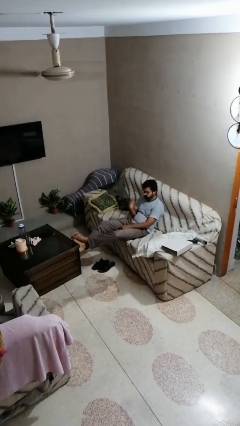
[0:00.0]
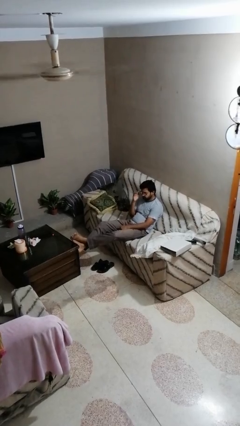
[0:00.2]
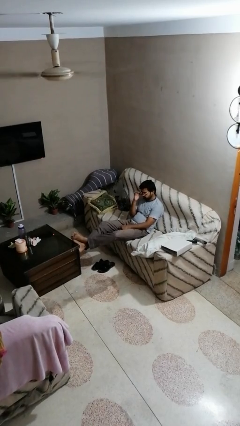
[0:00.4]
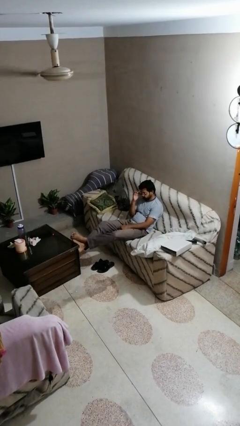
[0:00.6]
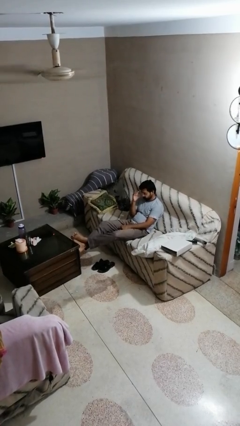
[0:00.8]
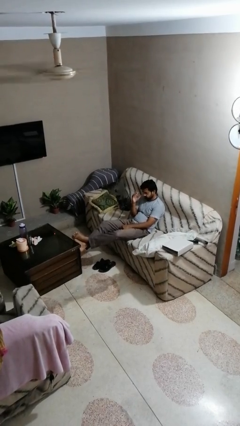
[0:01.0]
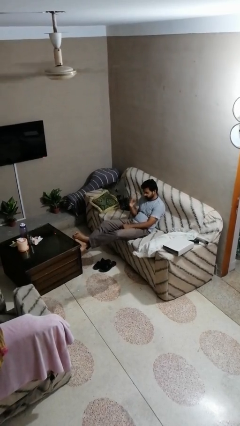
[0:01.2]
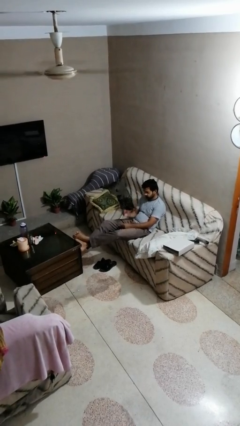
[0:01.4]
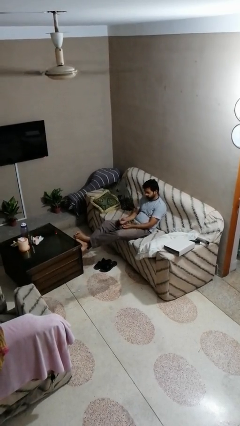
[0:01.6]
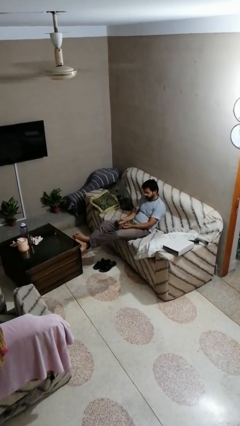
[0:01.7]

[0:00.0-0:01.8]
person takes off glasses

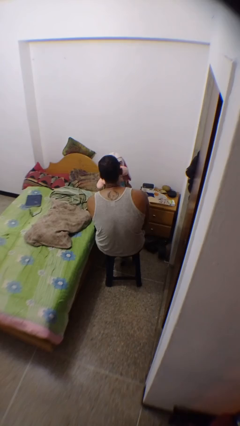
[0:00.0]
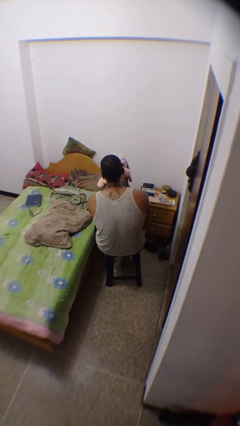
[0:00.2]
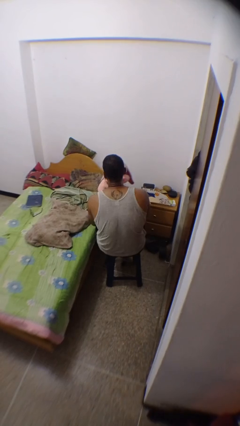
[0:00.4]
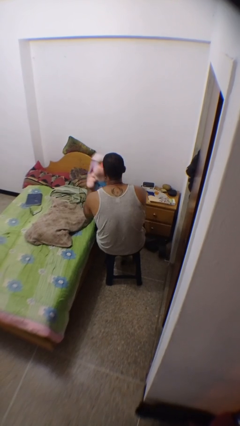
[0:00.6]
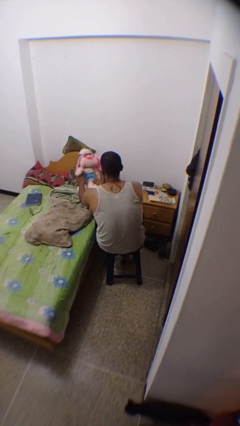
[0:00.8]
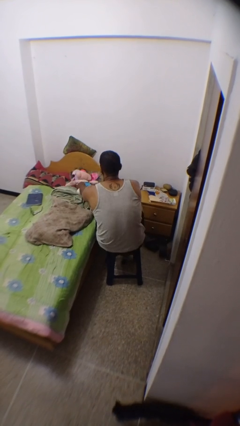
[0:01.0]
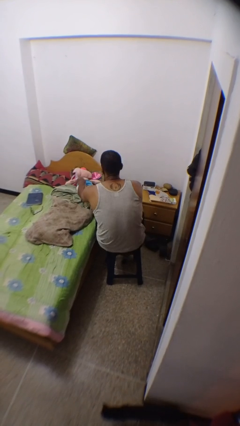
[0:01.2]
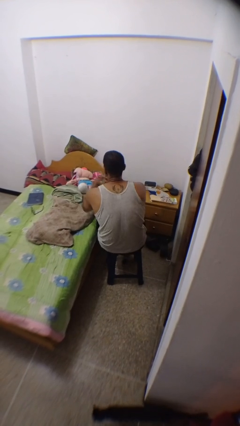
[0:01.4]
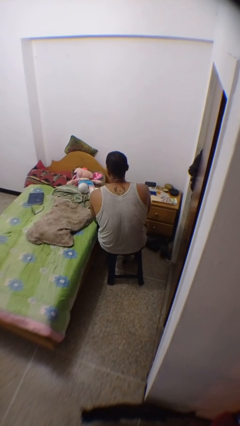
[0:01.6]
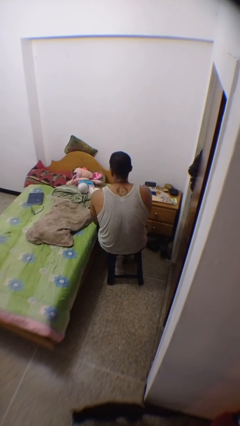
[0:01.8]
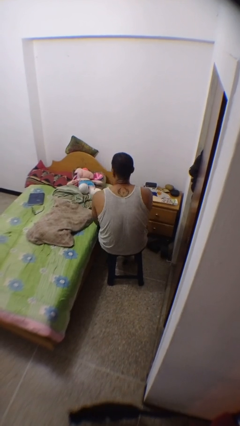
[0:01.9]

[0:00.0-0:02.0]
person puts down object on bed

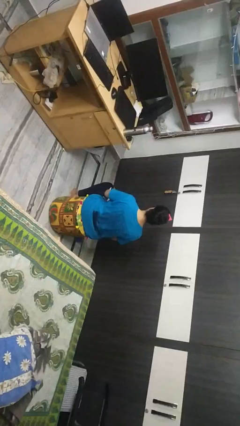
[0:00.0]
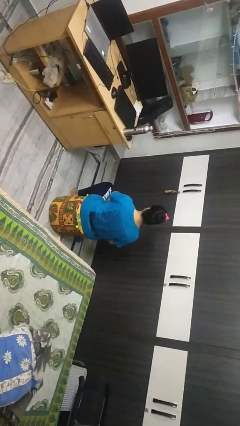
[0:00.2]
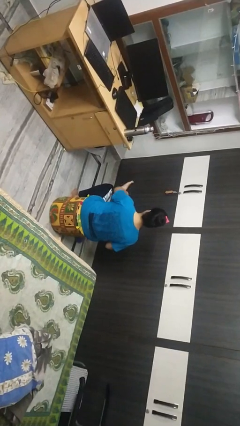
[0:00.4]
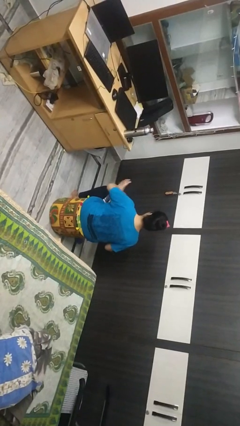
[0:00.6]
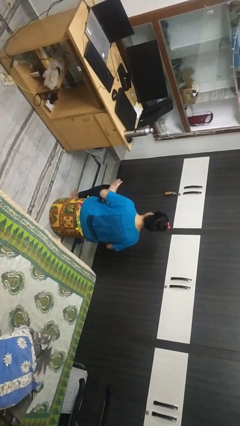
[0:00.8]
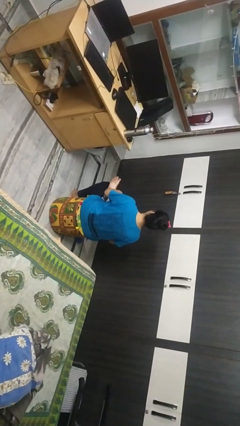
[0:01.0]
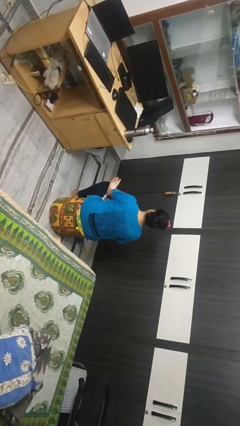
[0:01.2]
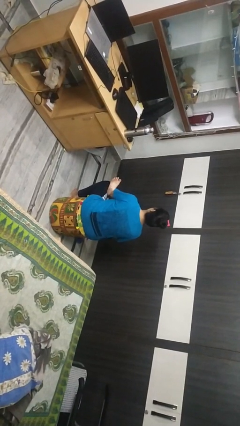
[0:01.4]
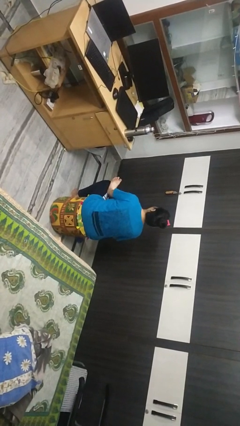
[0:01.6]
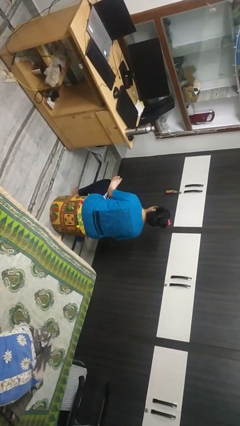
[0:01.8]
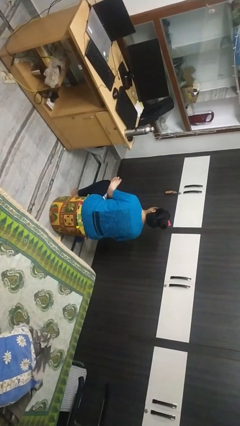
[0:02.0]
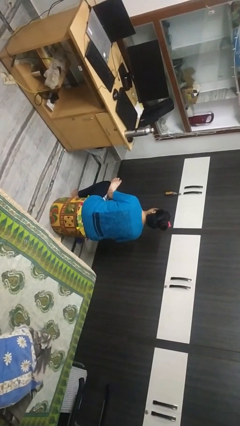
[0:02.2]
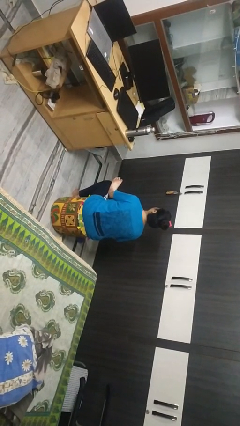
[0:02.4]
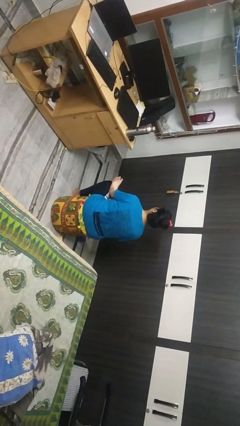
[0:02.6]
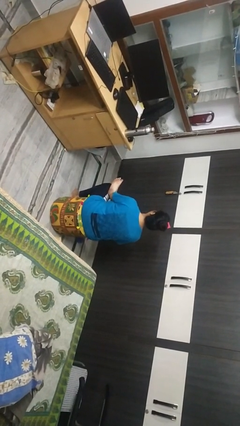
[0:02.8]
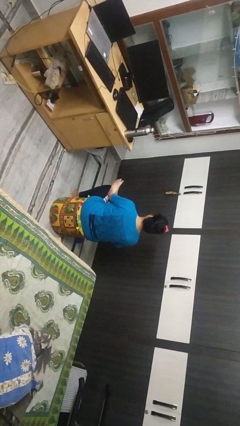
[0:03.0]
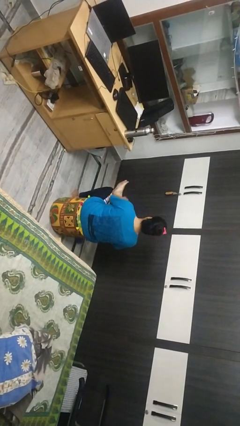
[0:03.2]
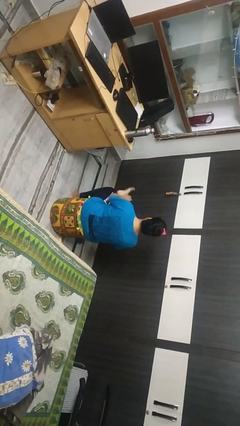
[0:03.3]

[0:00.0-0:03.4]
person crosses legs

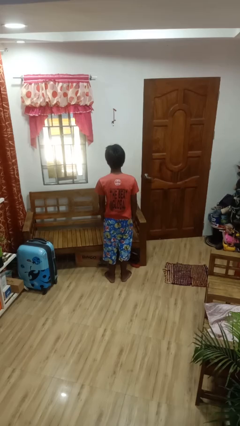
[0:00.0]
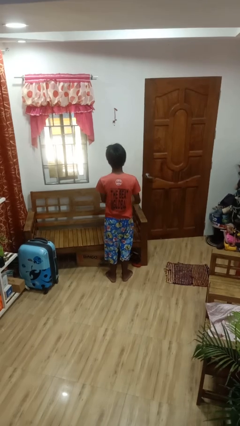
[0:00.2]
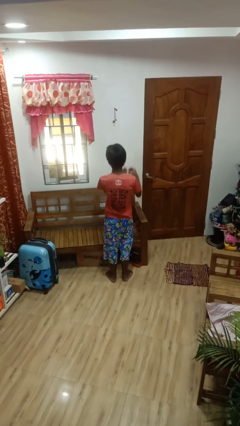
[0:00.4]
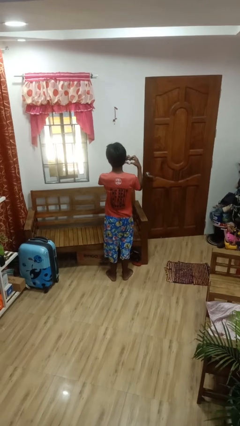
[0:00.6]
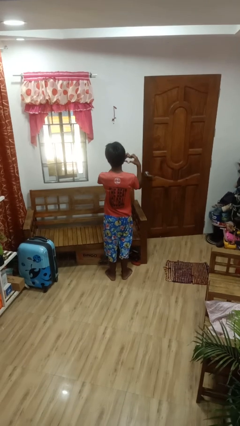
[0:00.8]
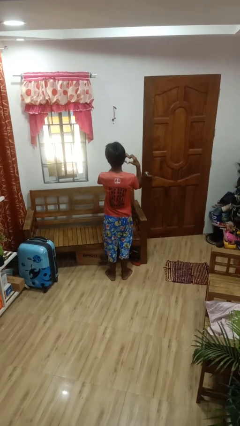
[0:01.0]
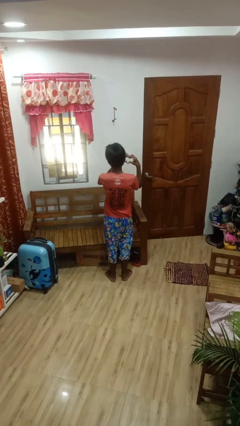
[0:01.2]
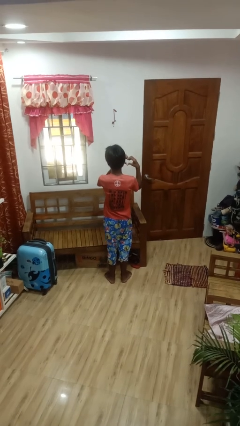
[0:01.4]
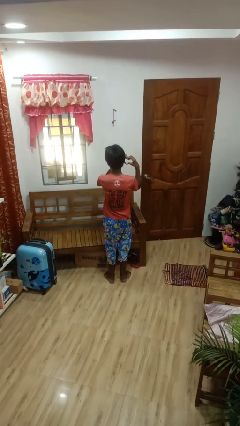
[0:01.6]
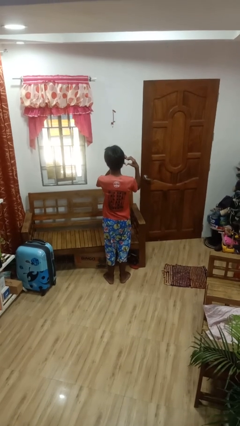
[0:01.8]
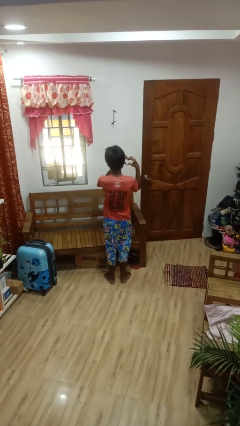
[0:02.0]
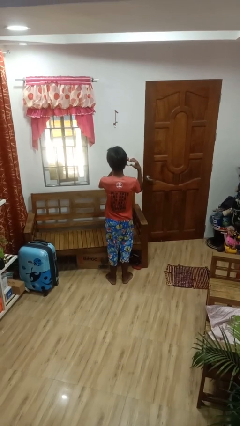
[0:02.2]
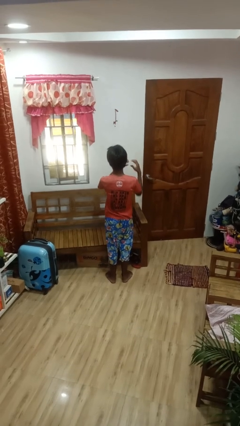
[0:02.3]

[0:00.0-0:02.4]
person gestures heart

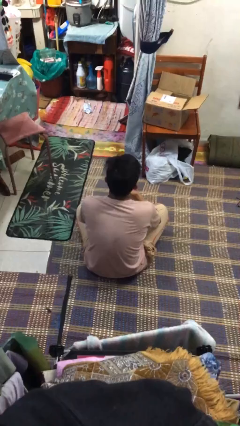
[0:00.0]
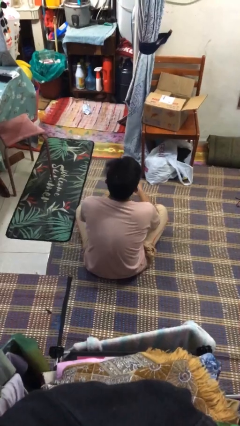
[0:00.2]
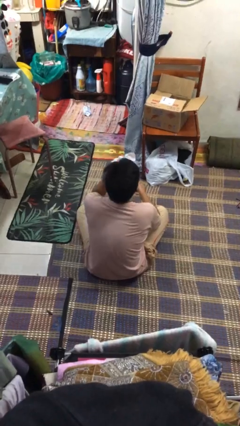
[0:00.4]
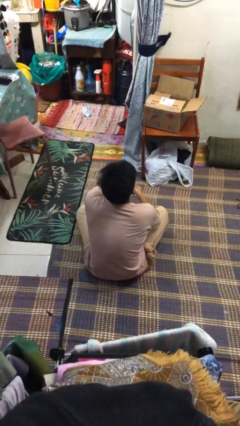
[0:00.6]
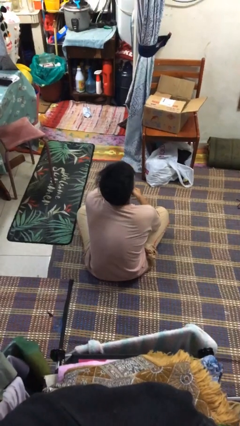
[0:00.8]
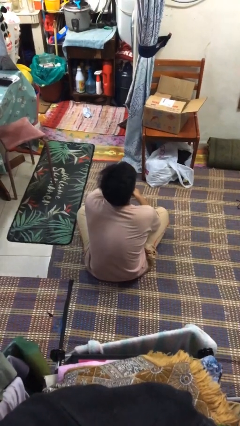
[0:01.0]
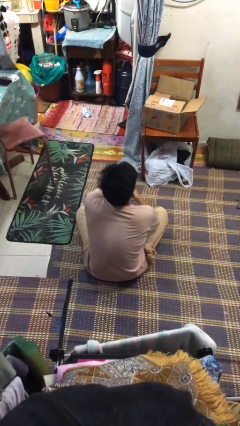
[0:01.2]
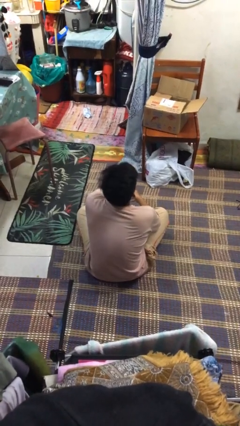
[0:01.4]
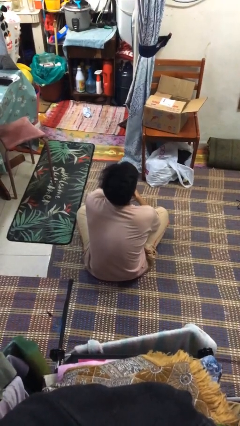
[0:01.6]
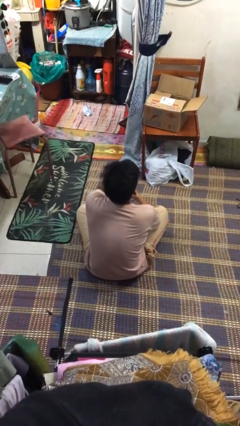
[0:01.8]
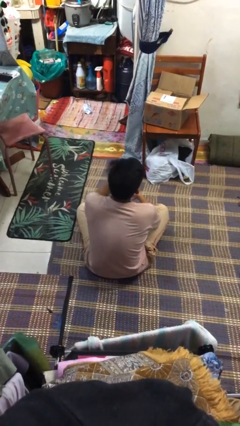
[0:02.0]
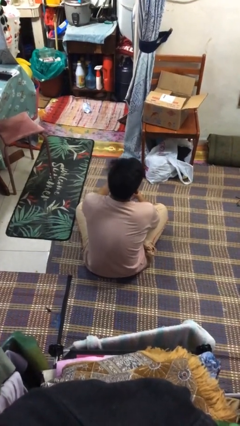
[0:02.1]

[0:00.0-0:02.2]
person blows nose

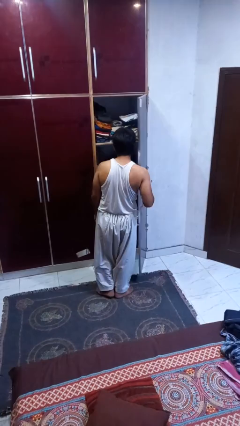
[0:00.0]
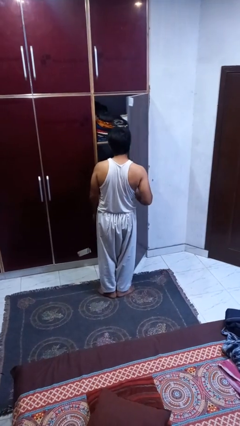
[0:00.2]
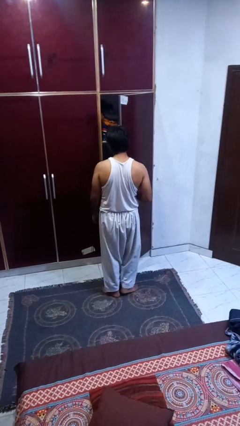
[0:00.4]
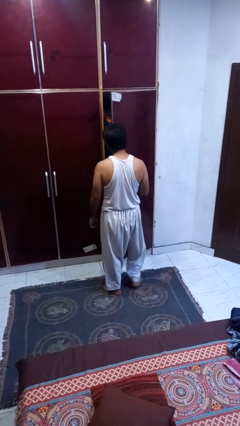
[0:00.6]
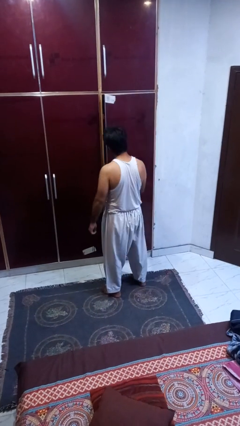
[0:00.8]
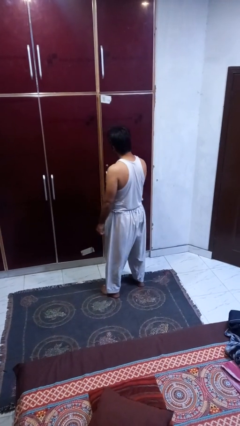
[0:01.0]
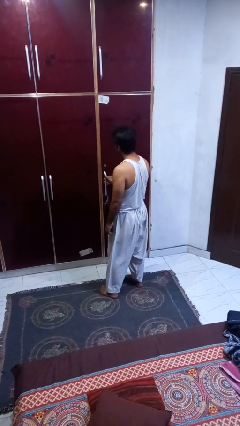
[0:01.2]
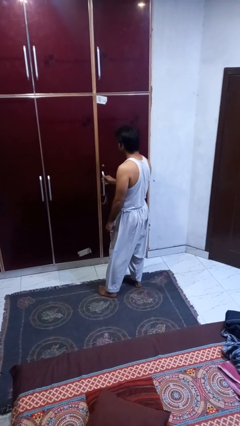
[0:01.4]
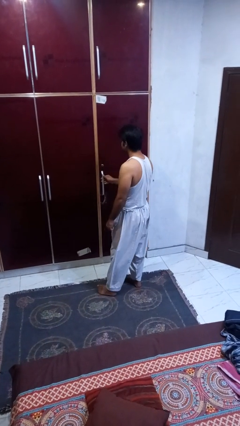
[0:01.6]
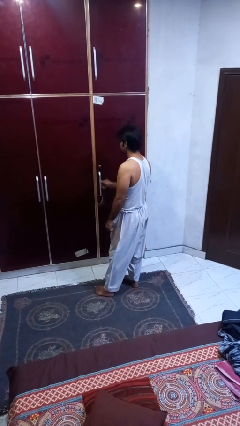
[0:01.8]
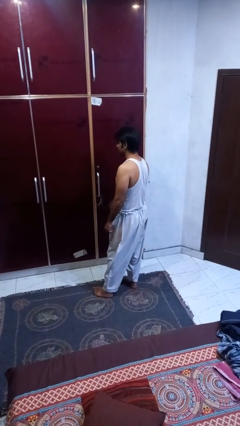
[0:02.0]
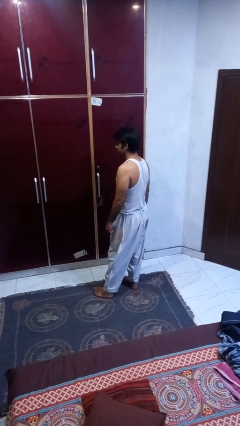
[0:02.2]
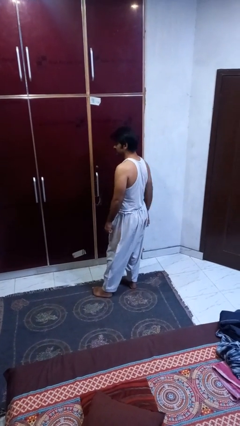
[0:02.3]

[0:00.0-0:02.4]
person closes closet door

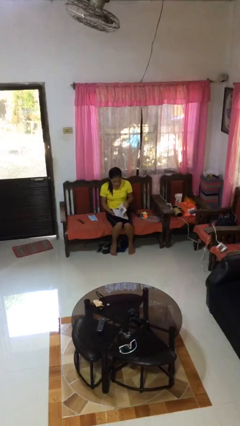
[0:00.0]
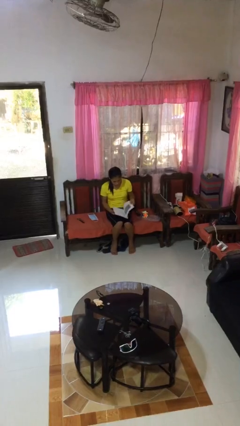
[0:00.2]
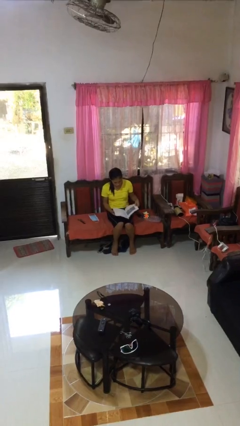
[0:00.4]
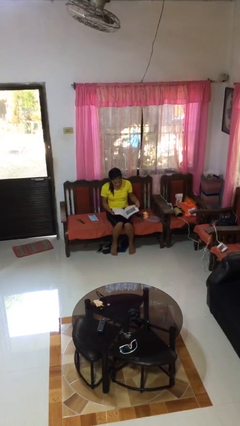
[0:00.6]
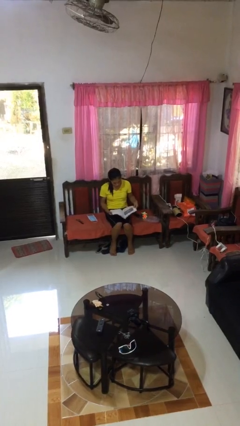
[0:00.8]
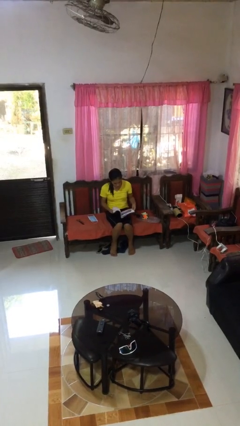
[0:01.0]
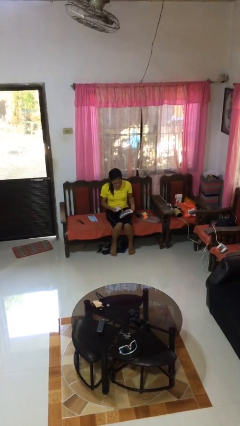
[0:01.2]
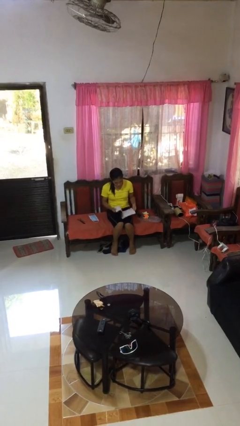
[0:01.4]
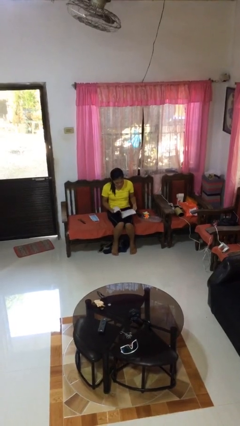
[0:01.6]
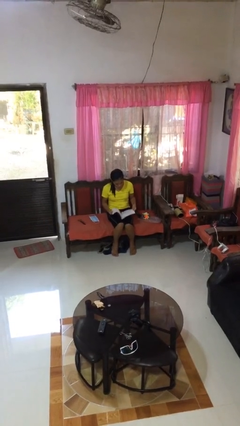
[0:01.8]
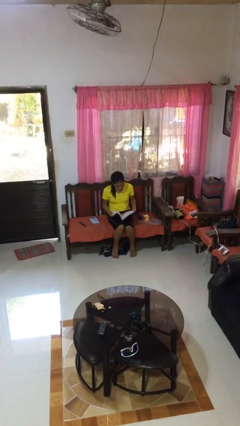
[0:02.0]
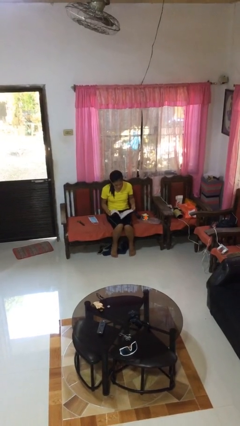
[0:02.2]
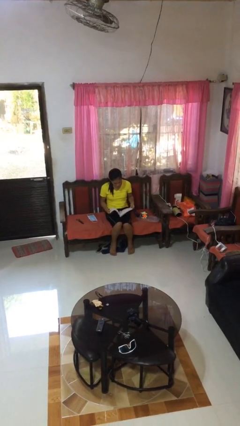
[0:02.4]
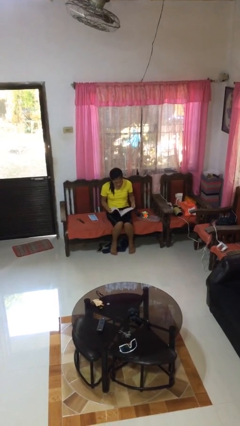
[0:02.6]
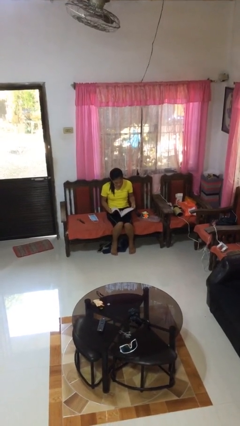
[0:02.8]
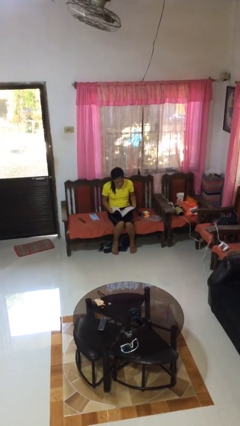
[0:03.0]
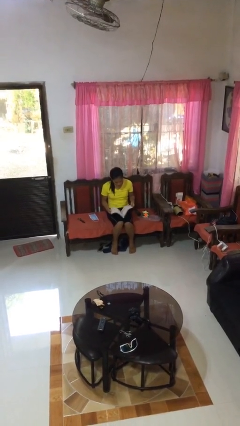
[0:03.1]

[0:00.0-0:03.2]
person reads book
